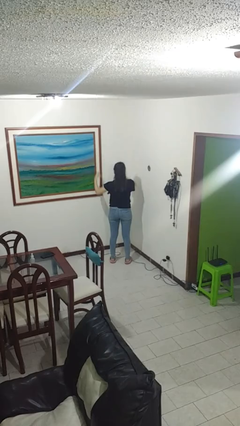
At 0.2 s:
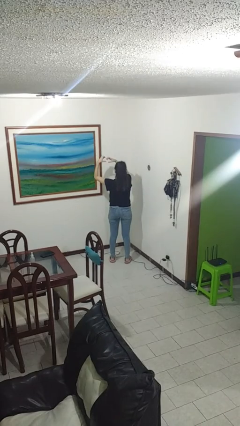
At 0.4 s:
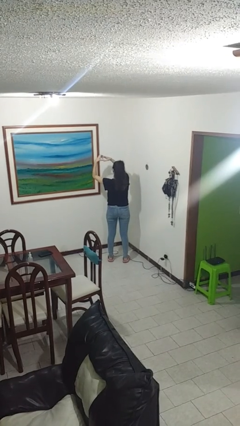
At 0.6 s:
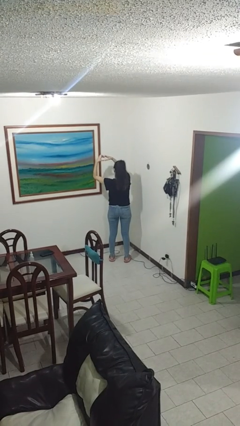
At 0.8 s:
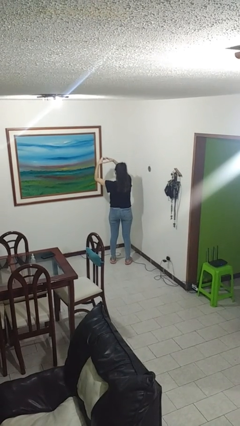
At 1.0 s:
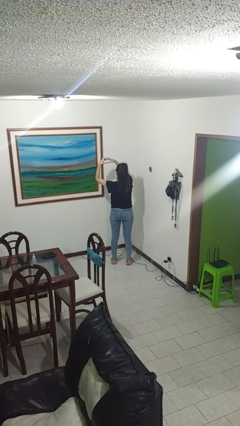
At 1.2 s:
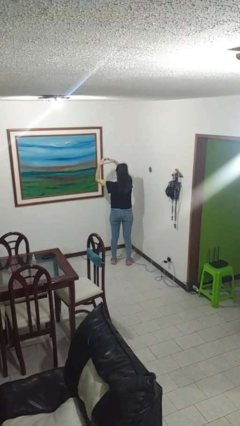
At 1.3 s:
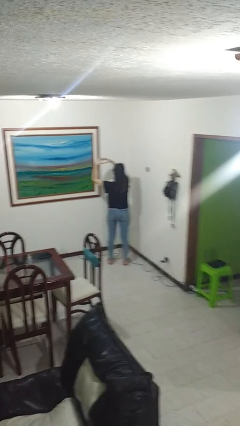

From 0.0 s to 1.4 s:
person gestures heart

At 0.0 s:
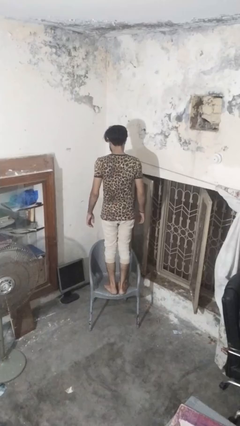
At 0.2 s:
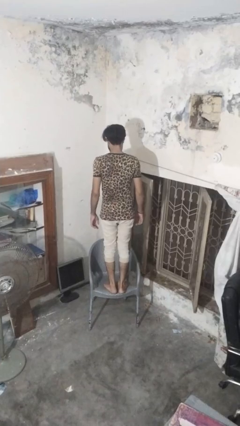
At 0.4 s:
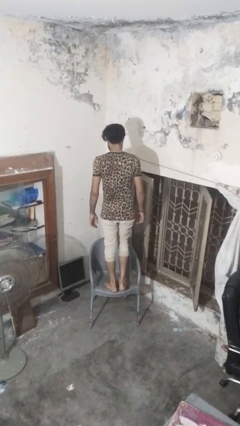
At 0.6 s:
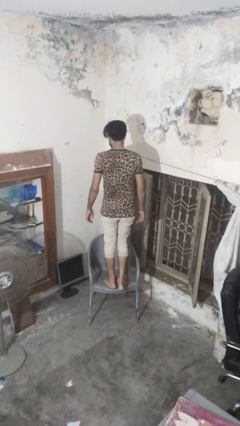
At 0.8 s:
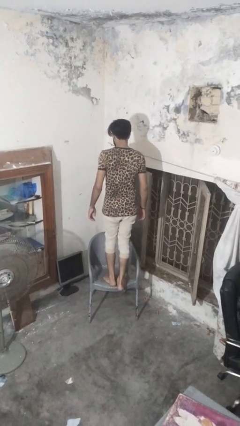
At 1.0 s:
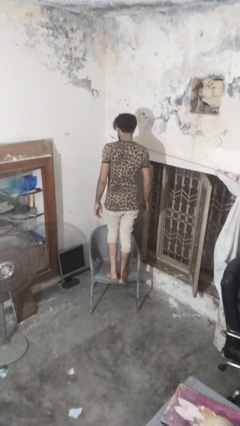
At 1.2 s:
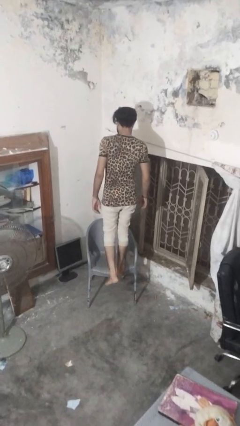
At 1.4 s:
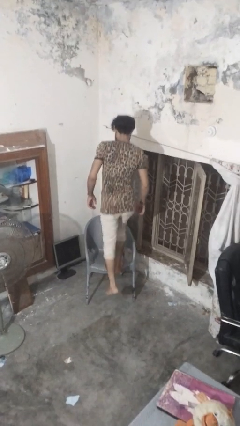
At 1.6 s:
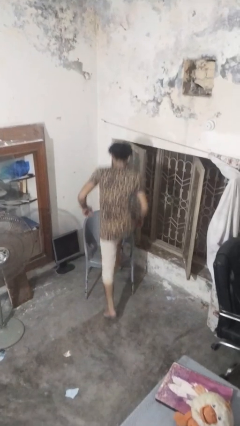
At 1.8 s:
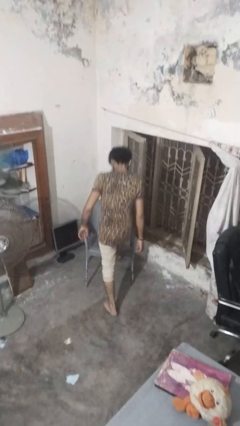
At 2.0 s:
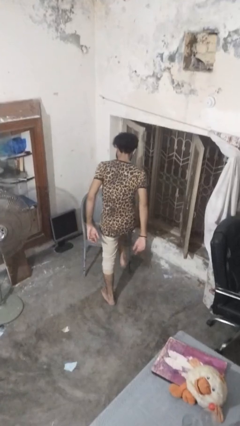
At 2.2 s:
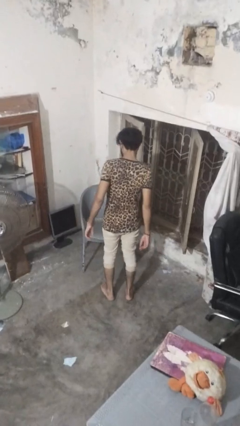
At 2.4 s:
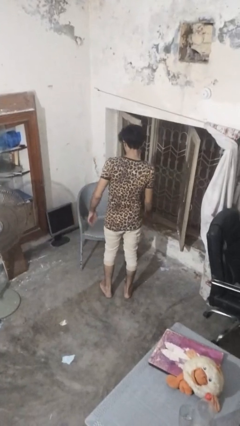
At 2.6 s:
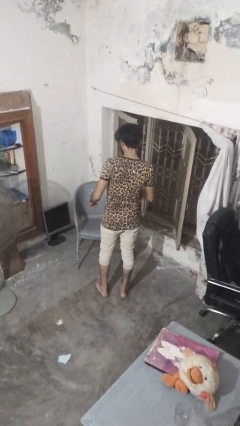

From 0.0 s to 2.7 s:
person climbs off chair

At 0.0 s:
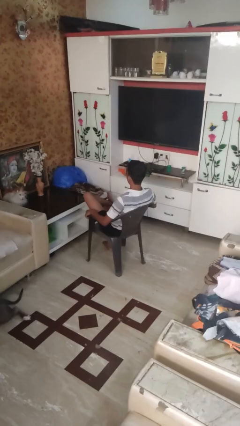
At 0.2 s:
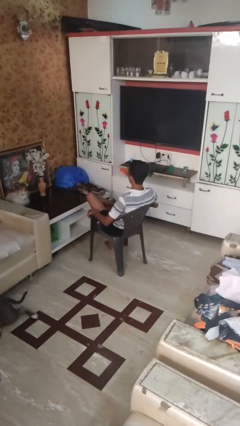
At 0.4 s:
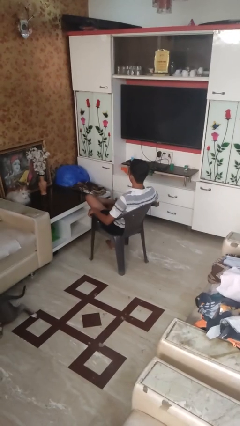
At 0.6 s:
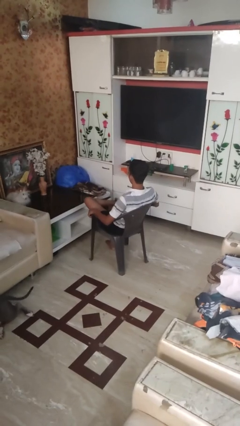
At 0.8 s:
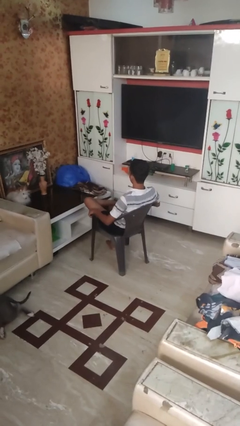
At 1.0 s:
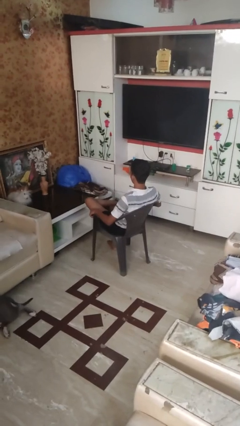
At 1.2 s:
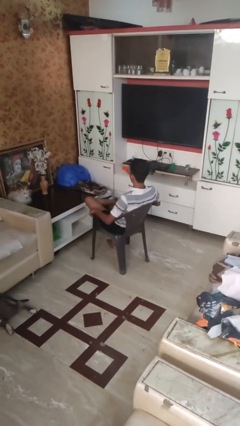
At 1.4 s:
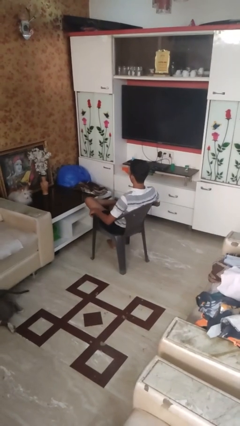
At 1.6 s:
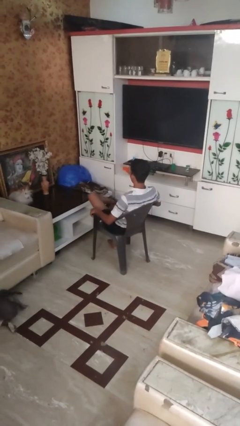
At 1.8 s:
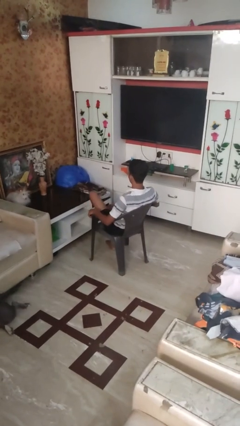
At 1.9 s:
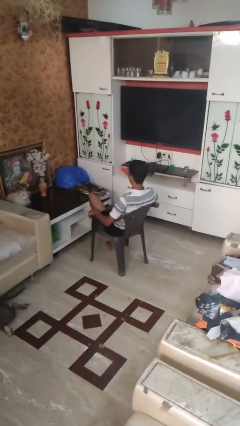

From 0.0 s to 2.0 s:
person crosses legs

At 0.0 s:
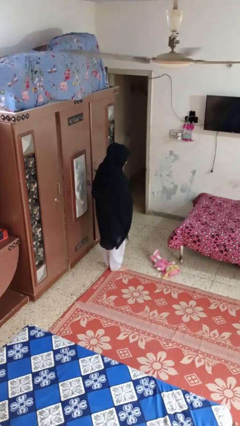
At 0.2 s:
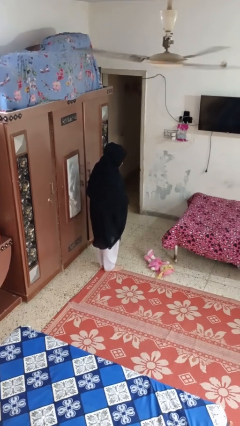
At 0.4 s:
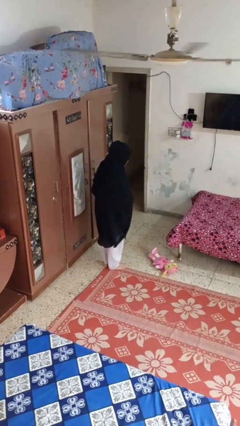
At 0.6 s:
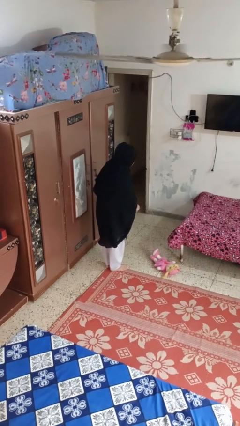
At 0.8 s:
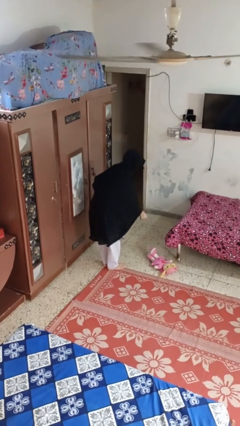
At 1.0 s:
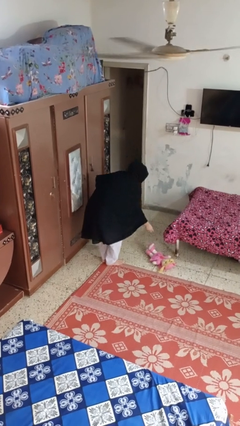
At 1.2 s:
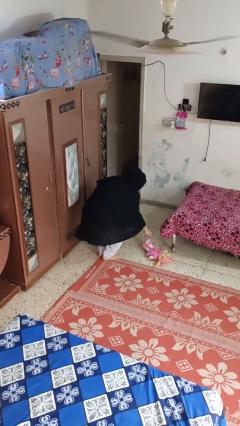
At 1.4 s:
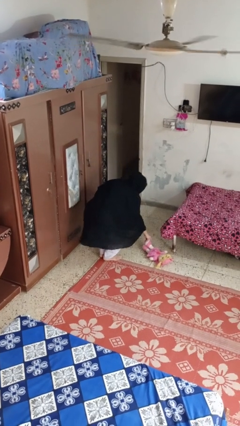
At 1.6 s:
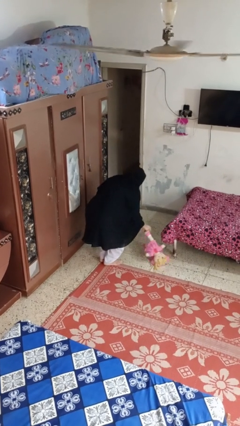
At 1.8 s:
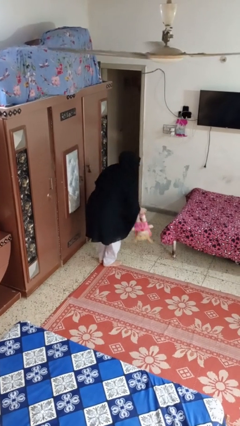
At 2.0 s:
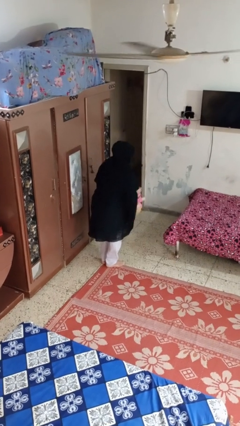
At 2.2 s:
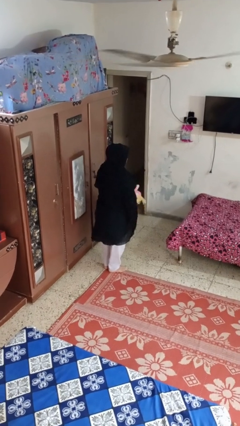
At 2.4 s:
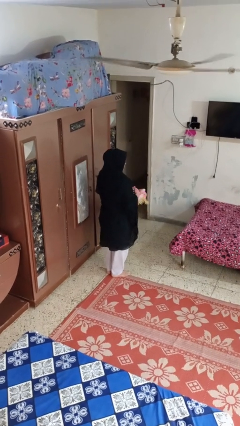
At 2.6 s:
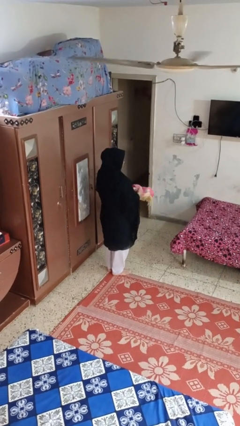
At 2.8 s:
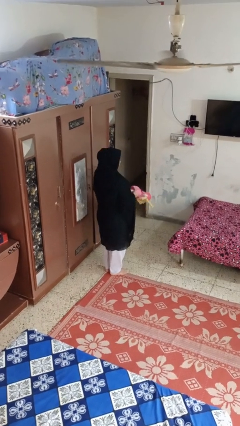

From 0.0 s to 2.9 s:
person picks up object from floor

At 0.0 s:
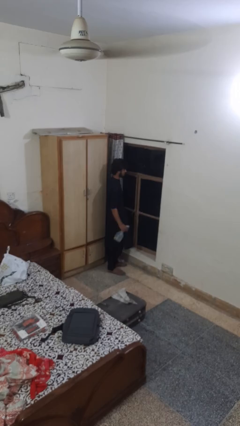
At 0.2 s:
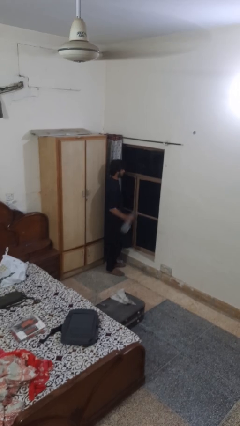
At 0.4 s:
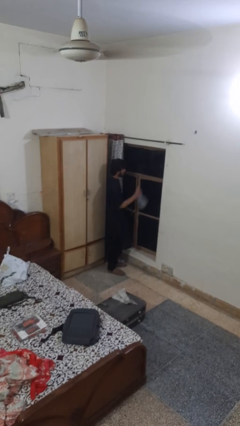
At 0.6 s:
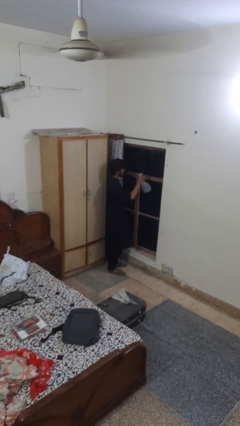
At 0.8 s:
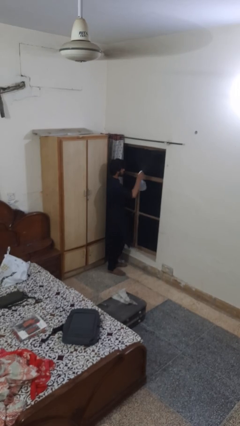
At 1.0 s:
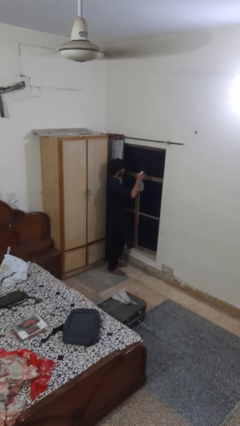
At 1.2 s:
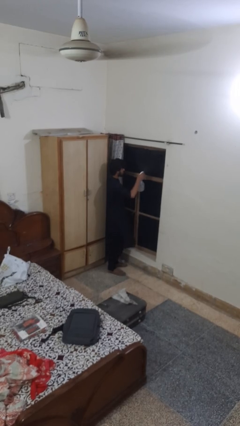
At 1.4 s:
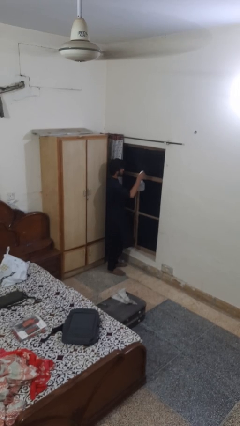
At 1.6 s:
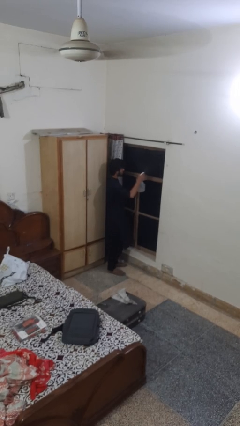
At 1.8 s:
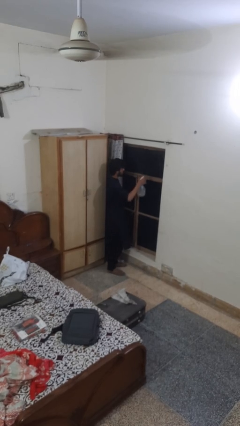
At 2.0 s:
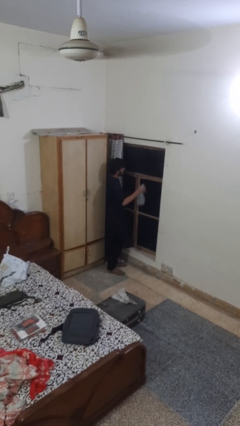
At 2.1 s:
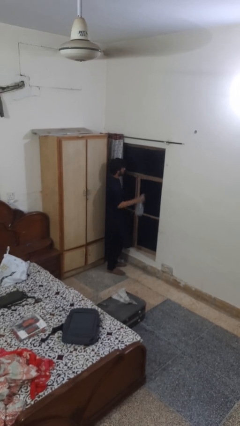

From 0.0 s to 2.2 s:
person sprays from bottle

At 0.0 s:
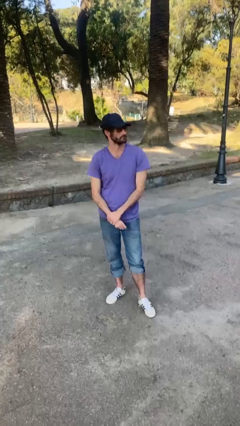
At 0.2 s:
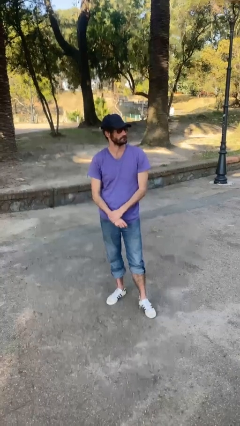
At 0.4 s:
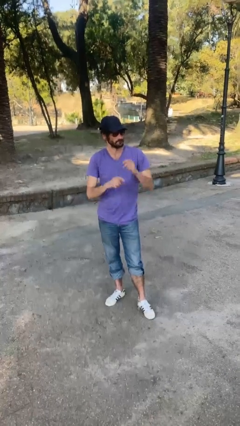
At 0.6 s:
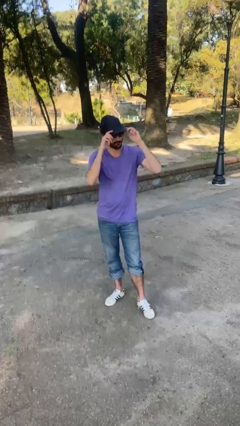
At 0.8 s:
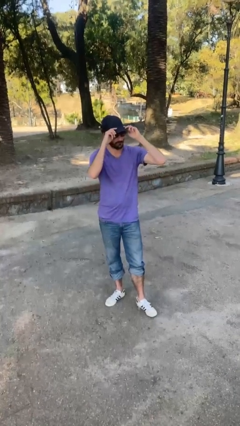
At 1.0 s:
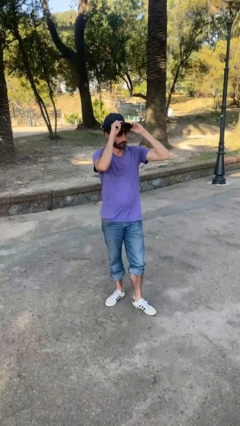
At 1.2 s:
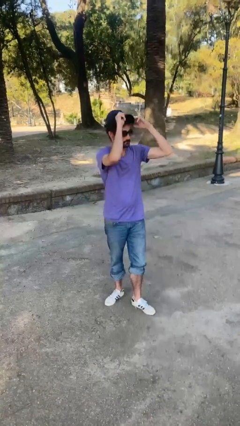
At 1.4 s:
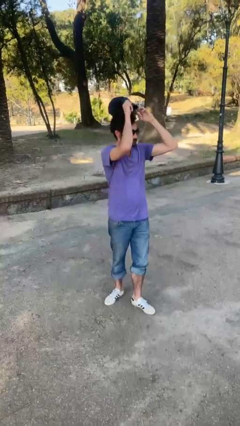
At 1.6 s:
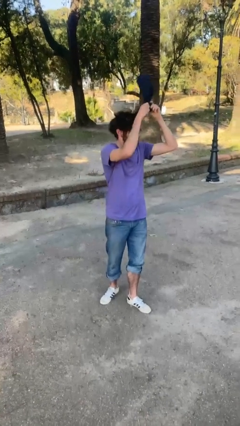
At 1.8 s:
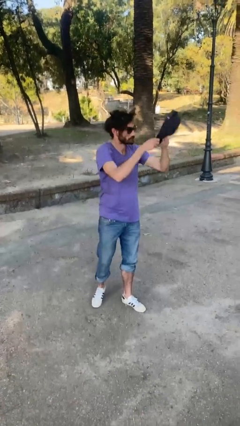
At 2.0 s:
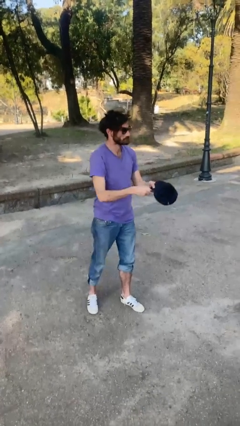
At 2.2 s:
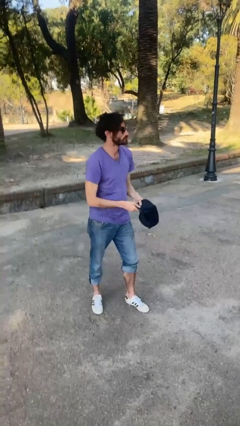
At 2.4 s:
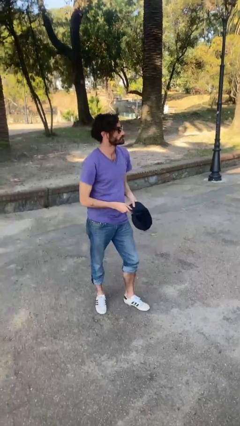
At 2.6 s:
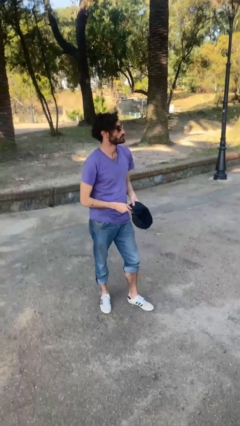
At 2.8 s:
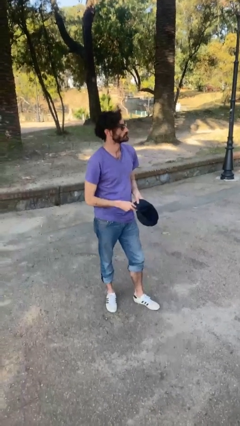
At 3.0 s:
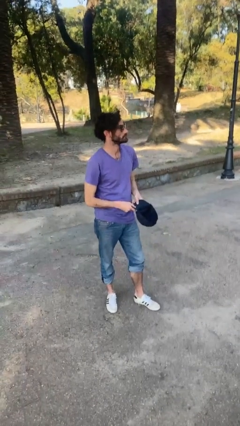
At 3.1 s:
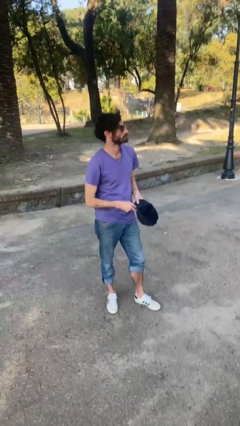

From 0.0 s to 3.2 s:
person takes off hat

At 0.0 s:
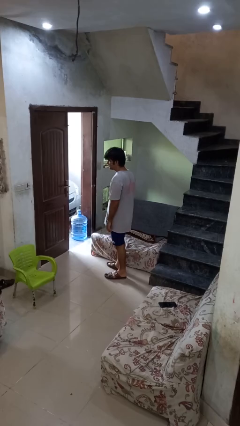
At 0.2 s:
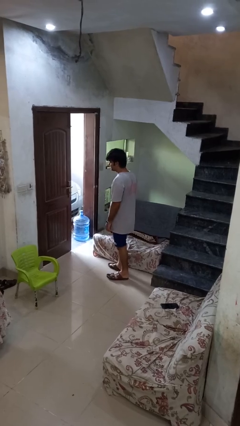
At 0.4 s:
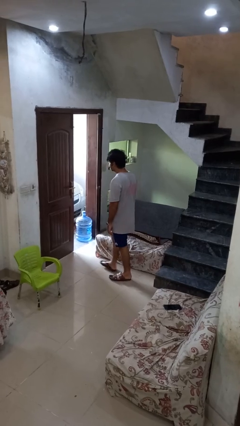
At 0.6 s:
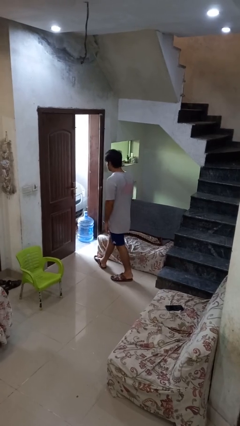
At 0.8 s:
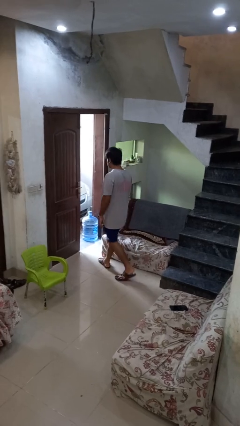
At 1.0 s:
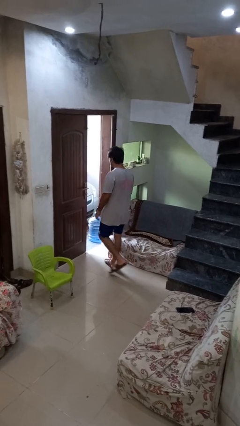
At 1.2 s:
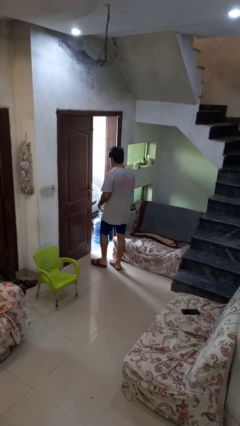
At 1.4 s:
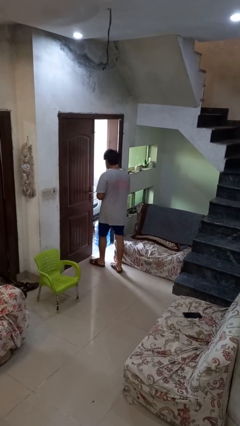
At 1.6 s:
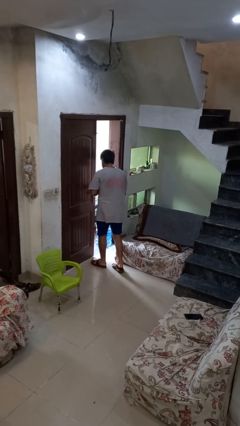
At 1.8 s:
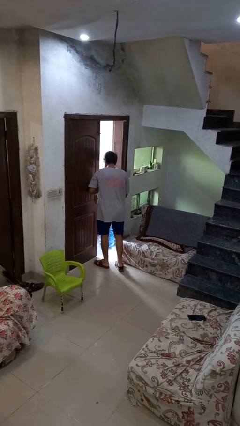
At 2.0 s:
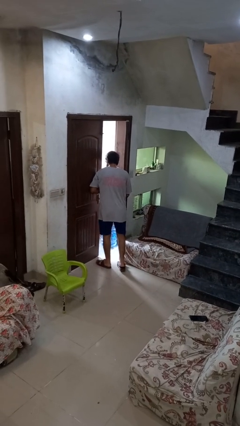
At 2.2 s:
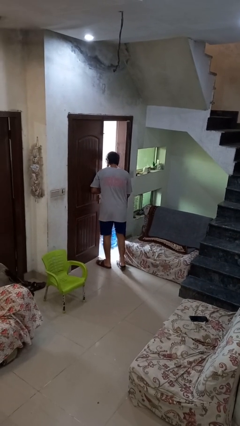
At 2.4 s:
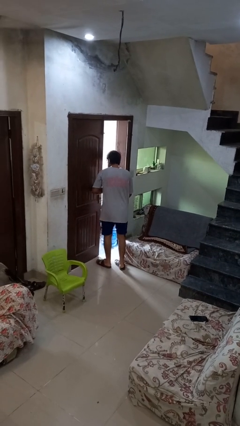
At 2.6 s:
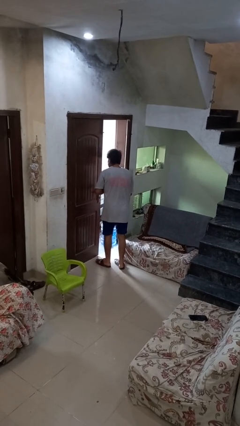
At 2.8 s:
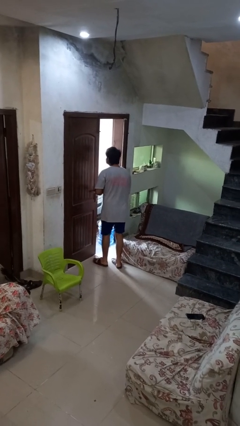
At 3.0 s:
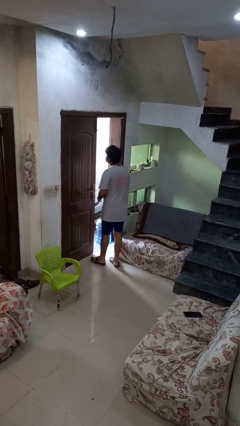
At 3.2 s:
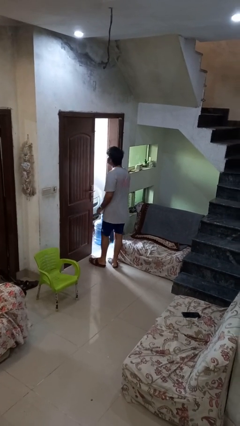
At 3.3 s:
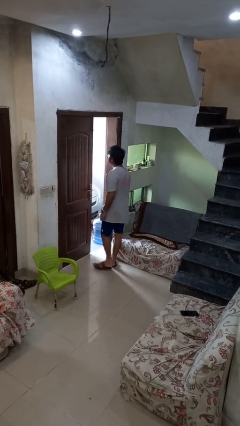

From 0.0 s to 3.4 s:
person bumps into wall
